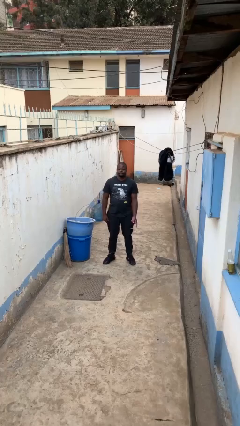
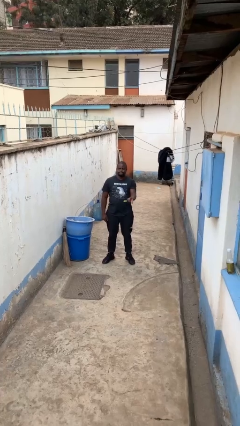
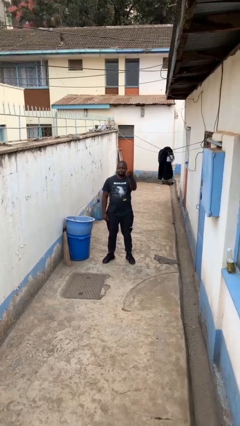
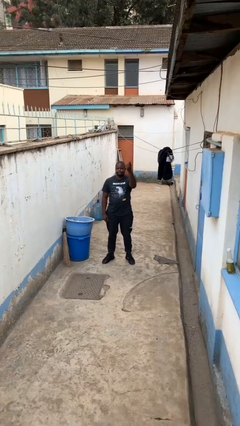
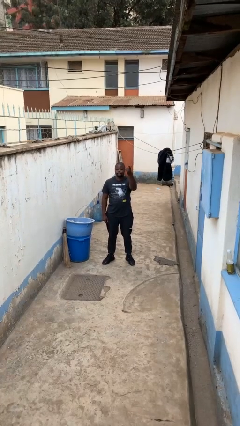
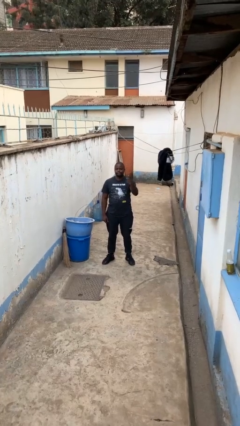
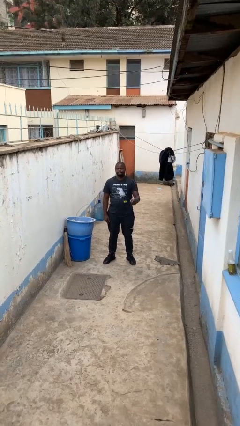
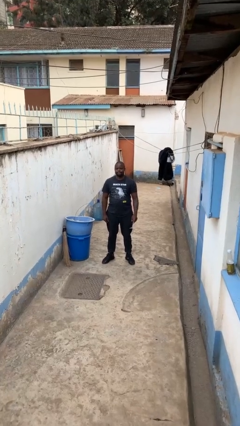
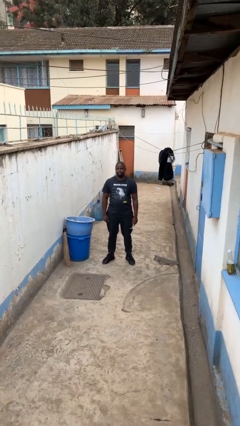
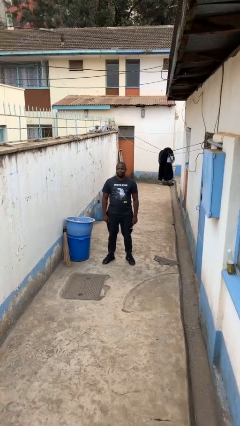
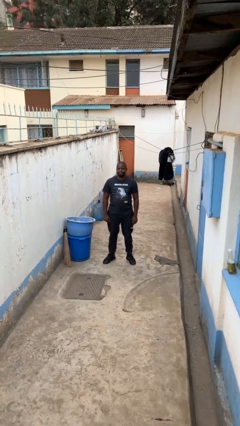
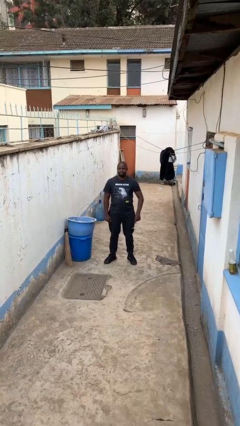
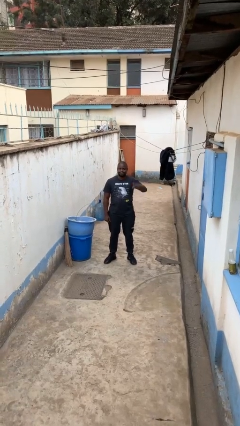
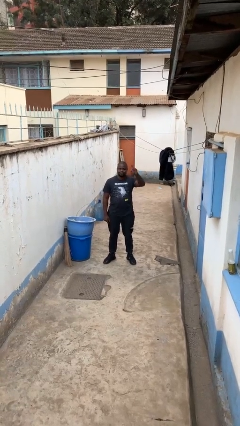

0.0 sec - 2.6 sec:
person gestures swipe up

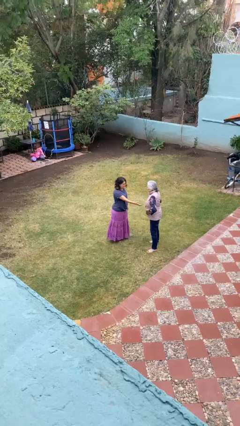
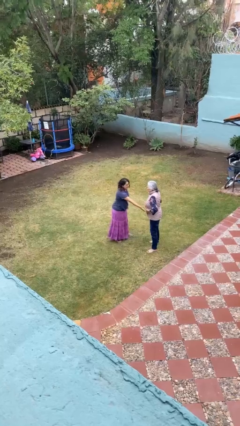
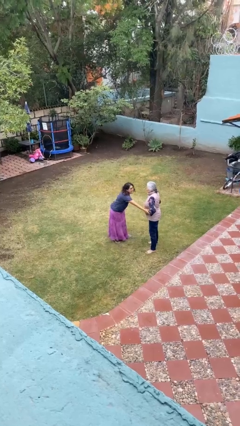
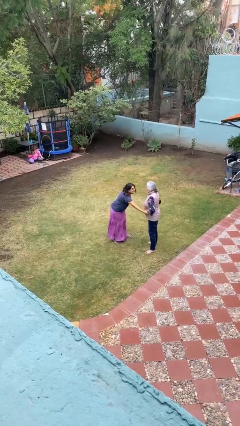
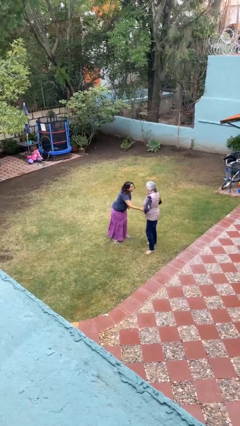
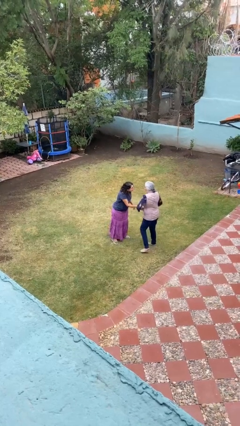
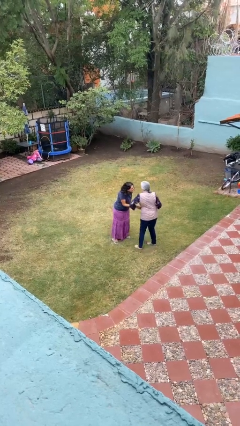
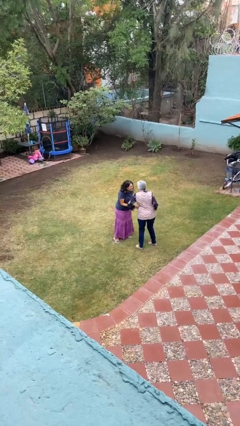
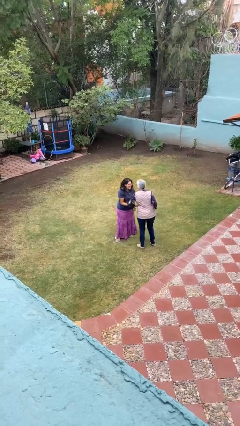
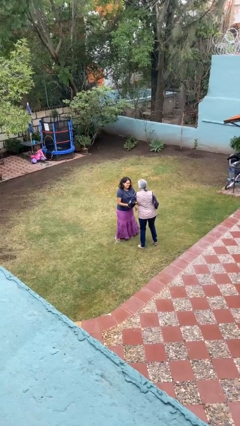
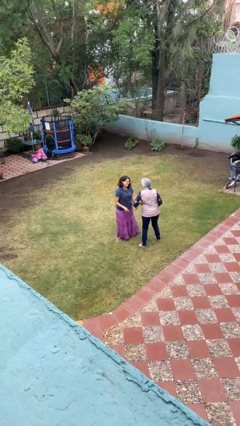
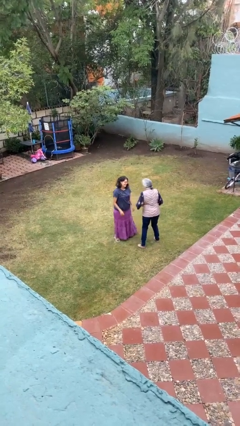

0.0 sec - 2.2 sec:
person grabs person by forearm

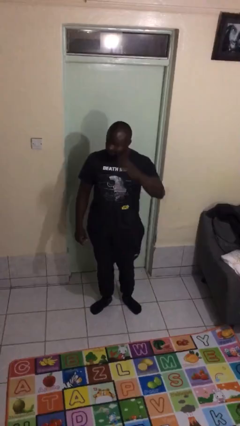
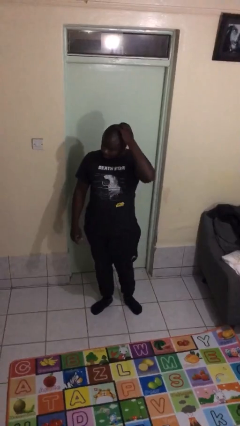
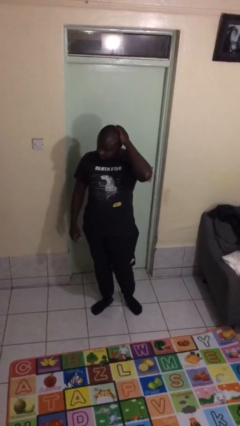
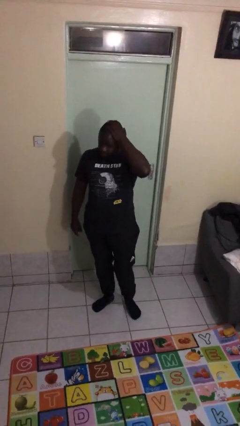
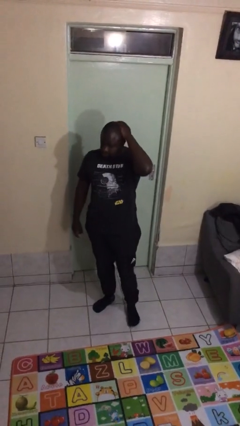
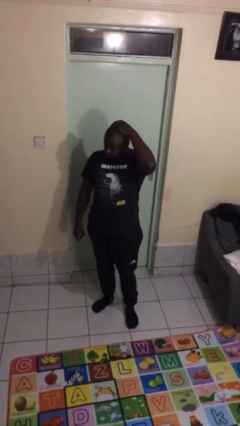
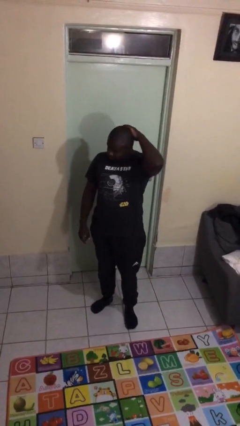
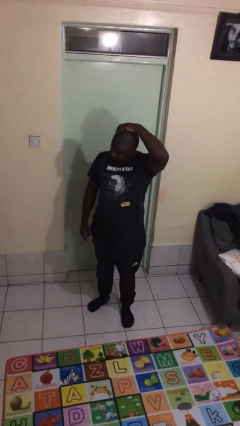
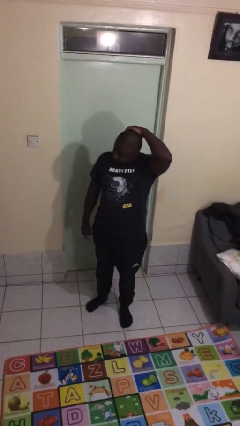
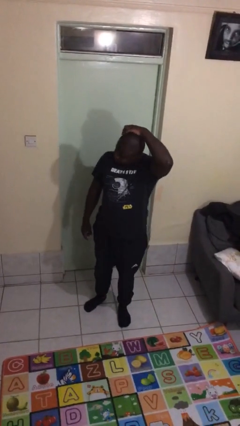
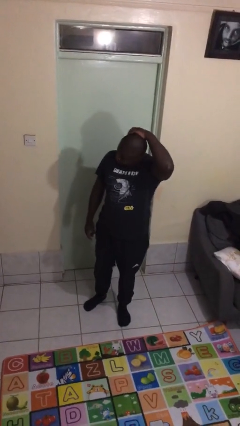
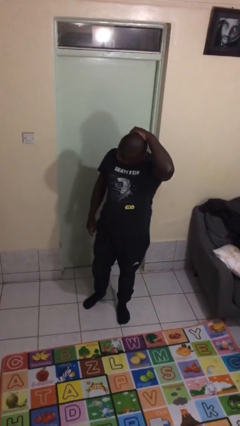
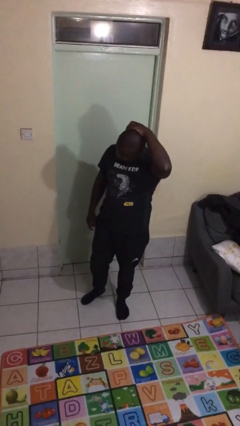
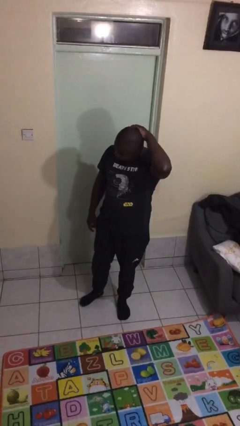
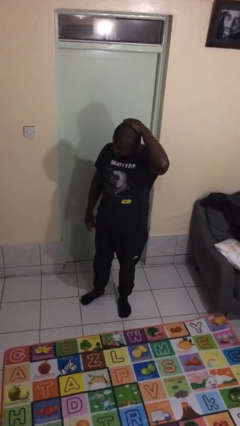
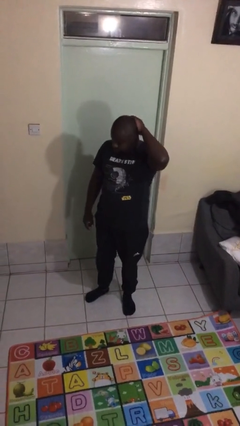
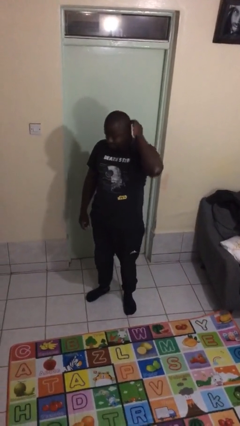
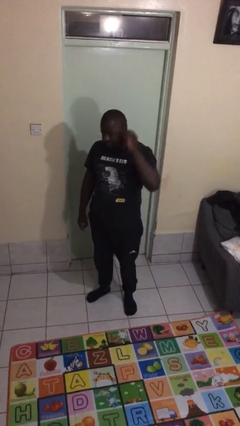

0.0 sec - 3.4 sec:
person scratches face

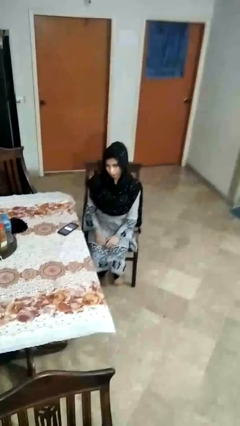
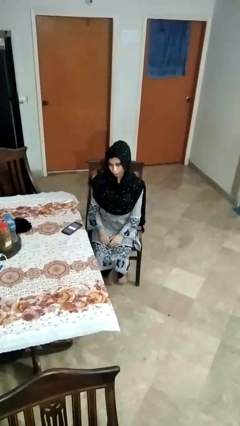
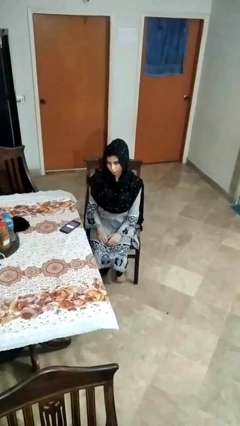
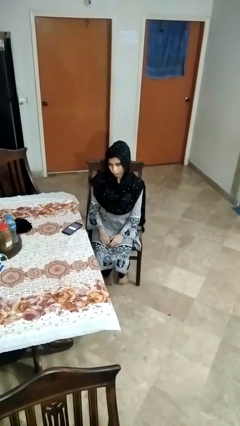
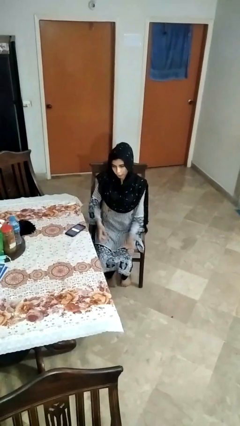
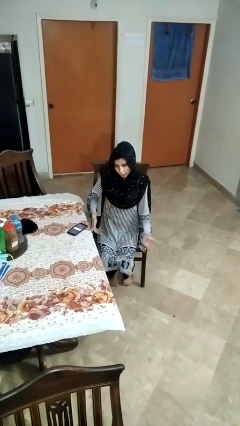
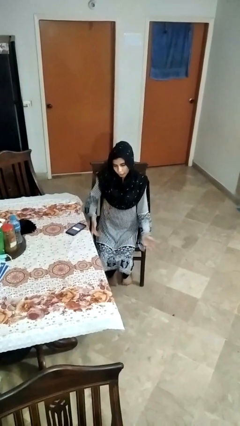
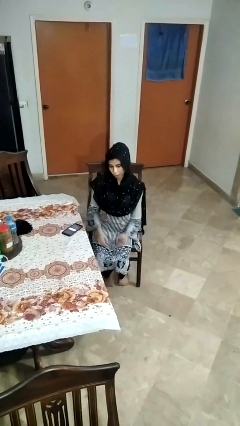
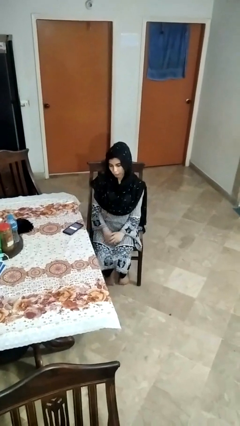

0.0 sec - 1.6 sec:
person shrugs

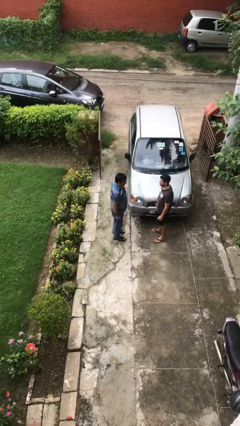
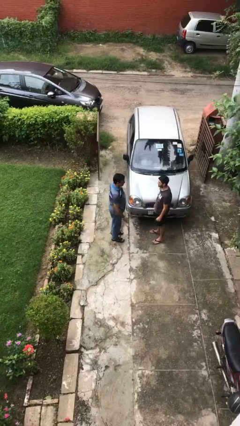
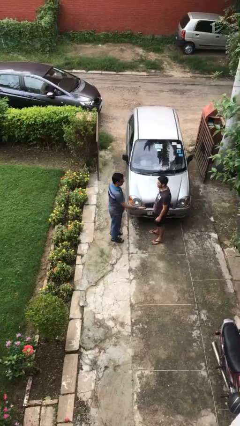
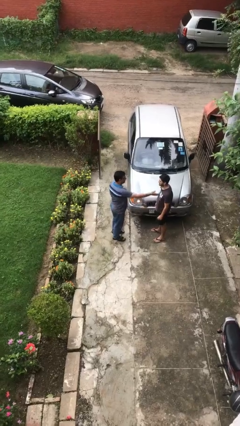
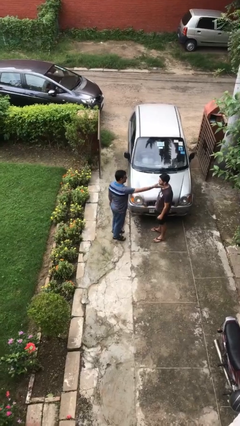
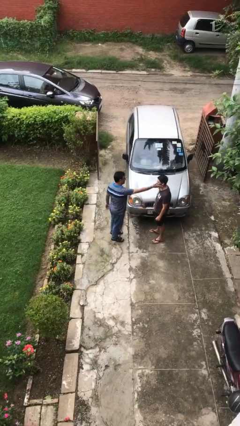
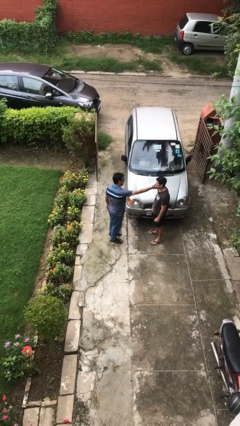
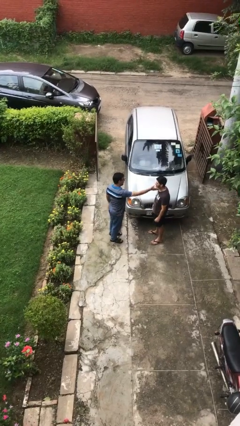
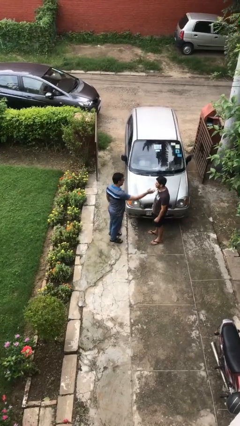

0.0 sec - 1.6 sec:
person touches face of person

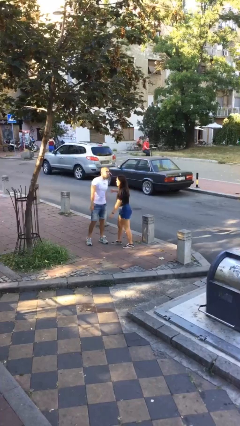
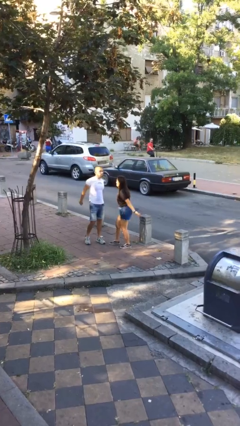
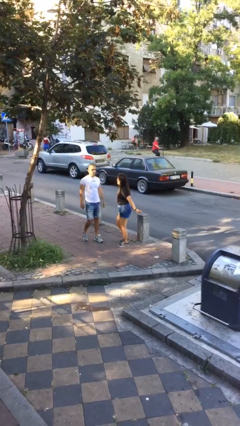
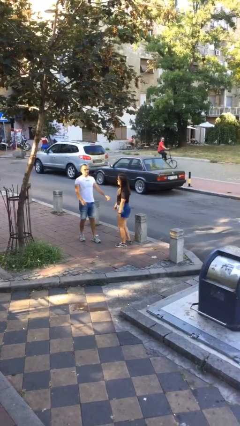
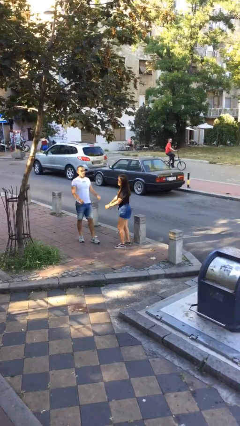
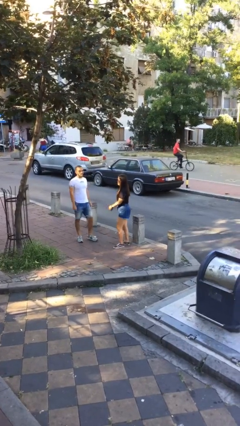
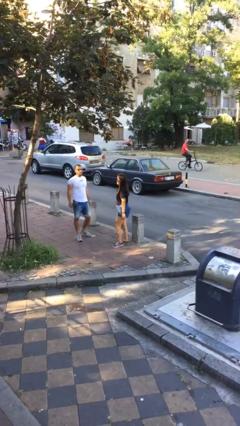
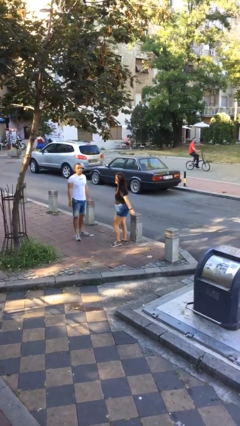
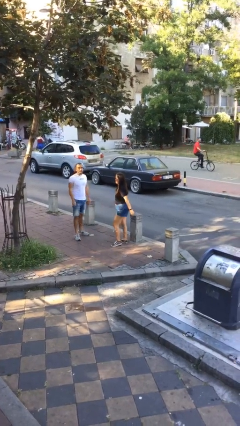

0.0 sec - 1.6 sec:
person talks to person

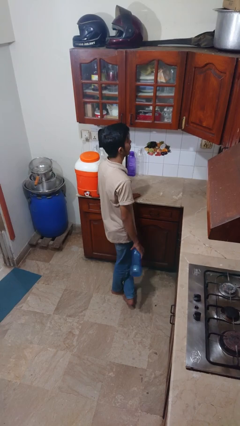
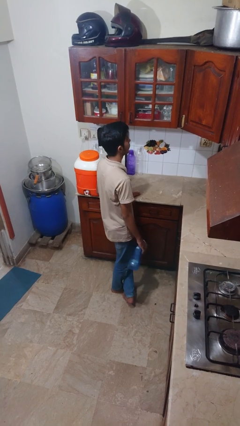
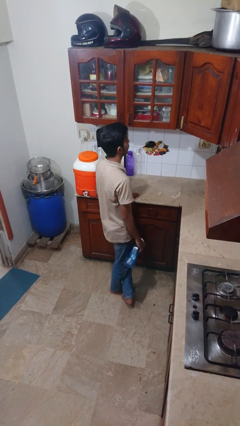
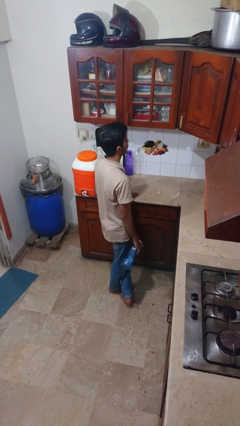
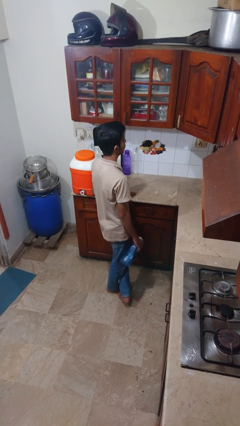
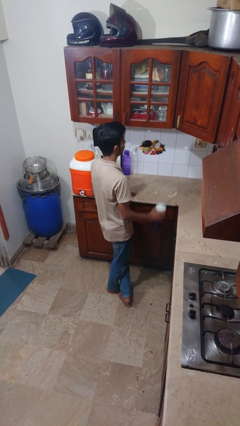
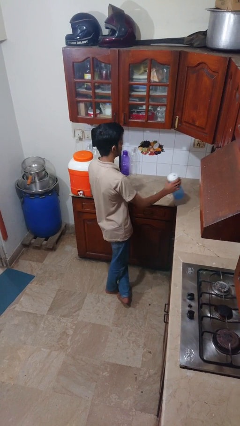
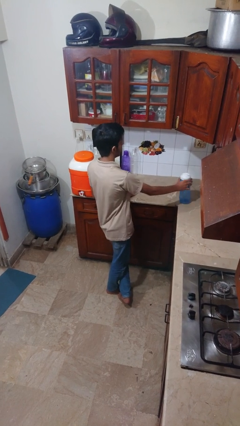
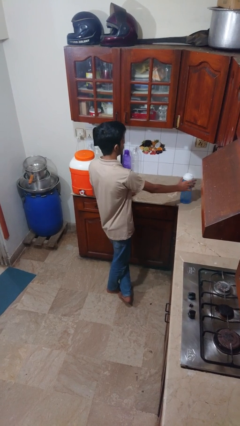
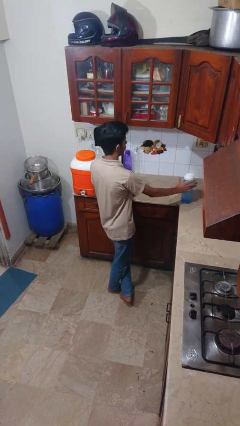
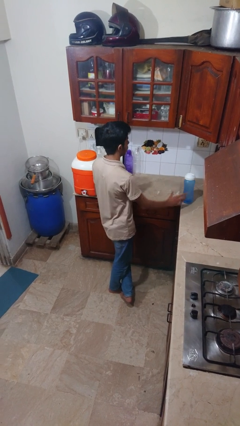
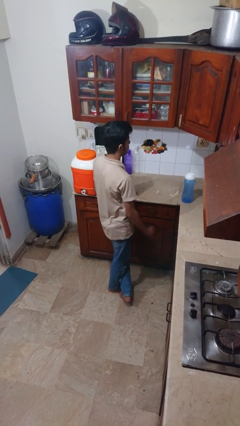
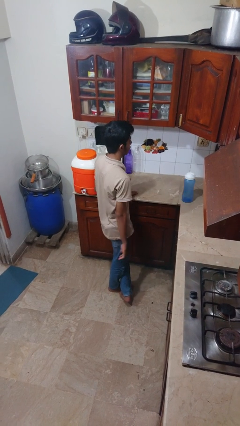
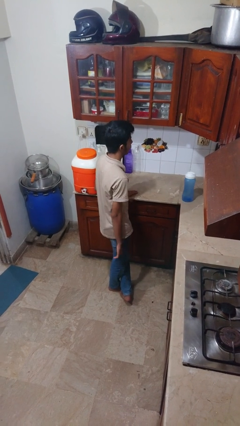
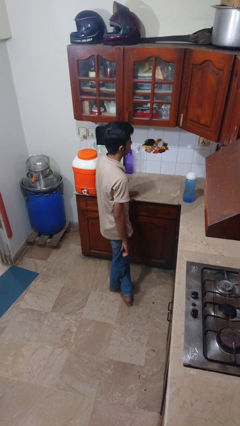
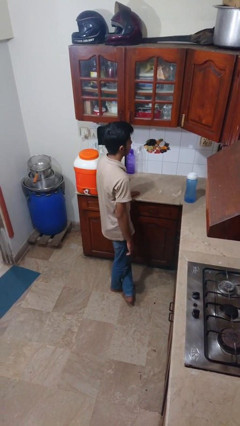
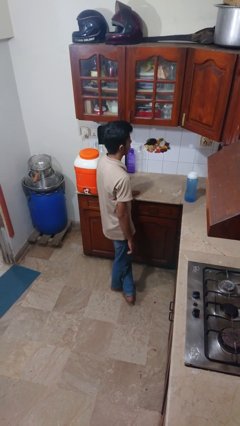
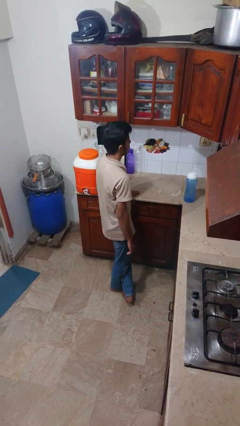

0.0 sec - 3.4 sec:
person puts down object on countertop

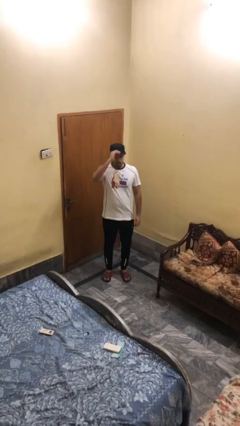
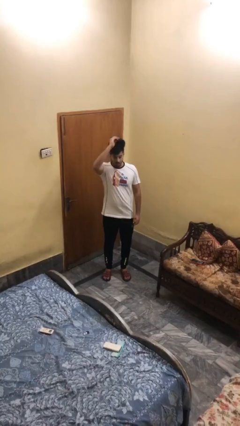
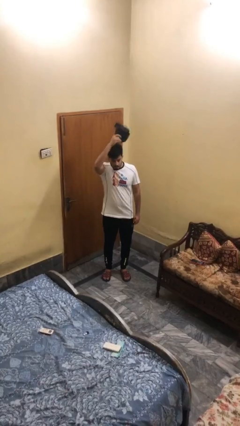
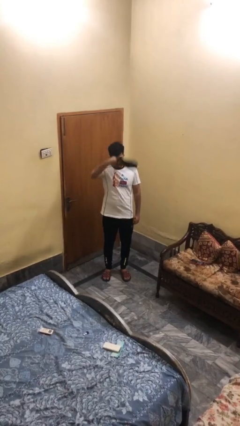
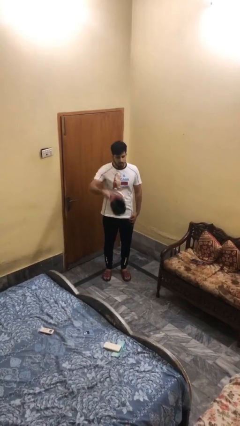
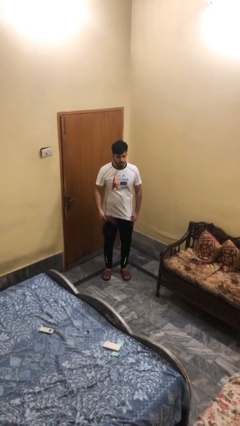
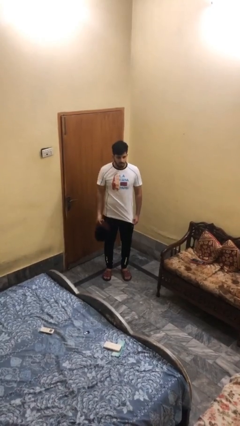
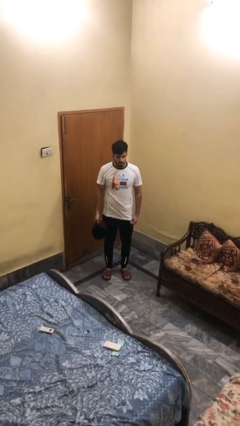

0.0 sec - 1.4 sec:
person takes off hat
